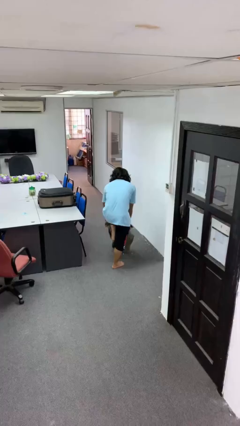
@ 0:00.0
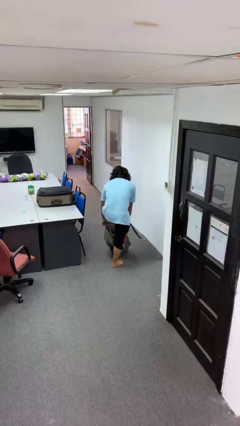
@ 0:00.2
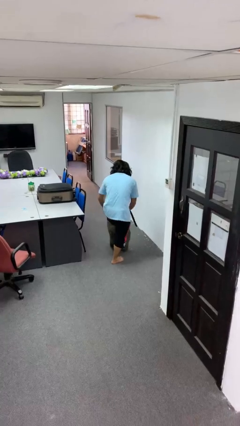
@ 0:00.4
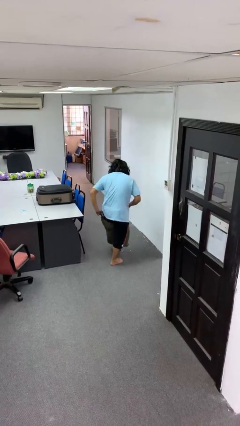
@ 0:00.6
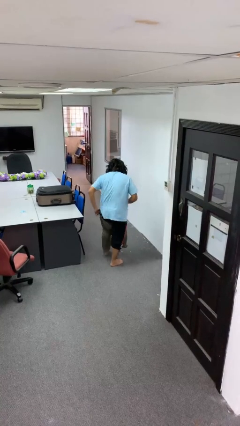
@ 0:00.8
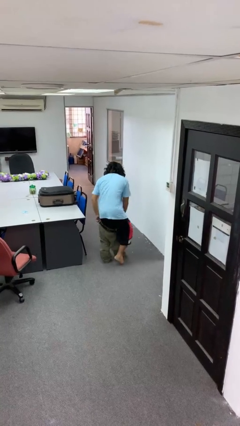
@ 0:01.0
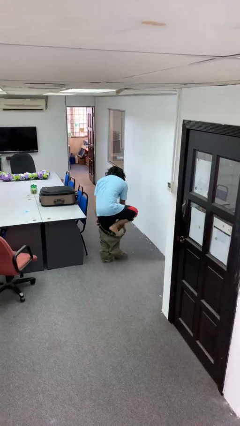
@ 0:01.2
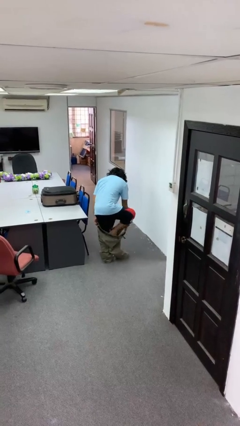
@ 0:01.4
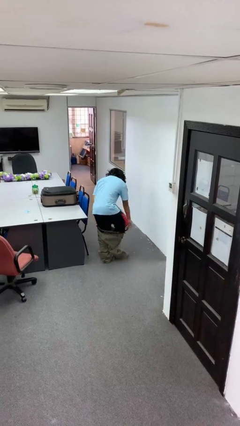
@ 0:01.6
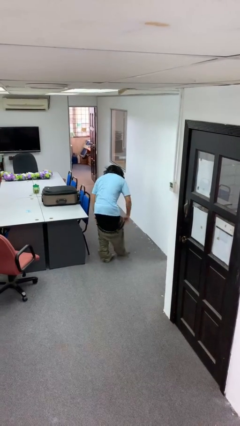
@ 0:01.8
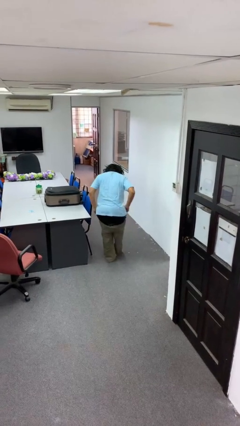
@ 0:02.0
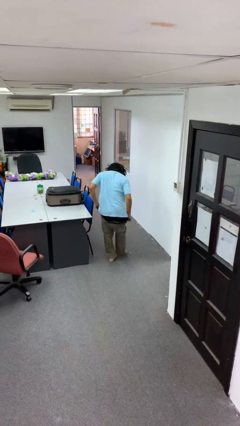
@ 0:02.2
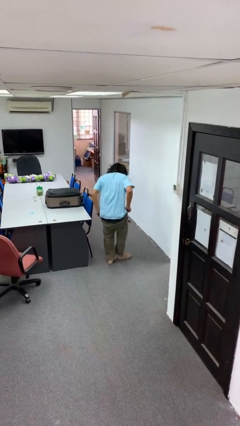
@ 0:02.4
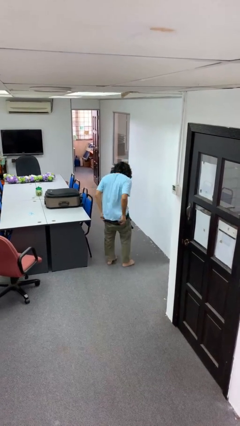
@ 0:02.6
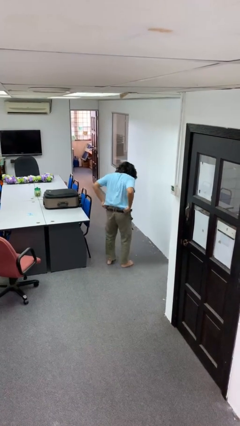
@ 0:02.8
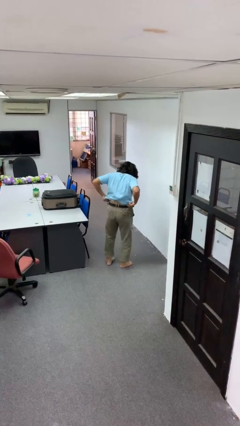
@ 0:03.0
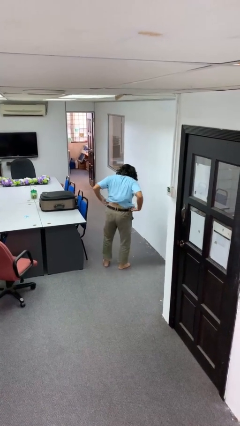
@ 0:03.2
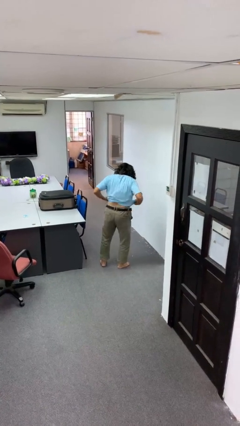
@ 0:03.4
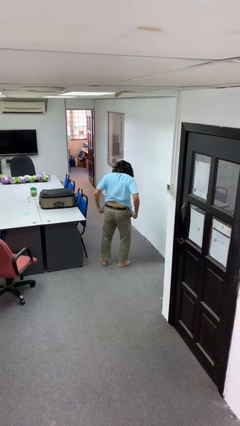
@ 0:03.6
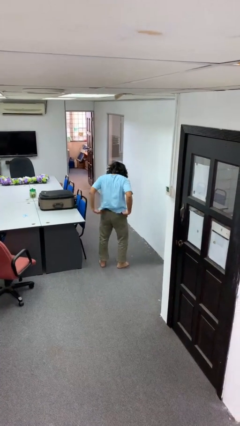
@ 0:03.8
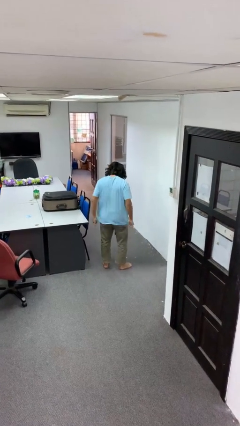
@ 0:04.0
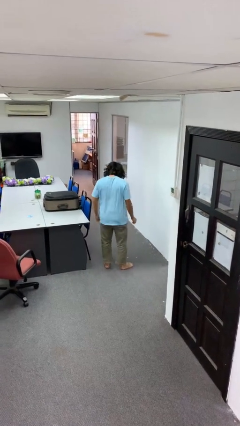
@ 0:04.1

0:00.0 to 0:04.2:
person takes off pants

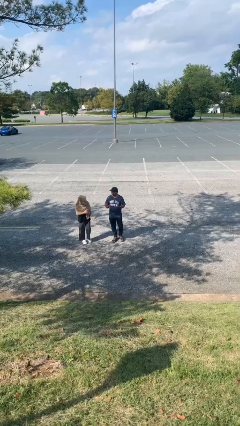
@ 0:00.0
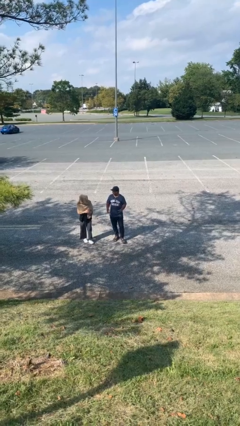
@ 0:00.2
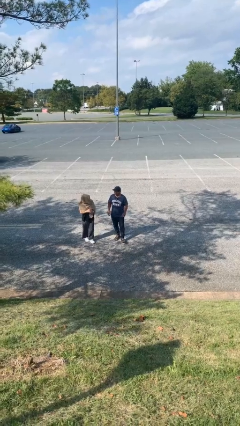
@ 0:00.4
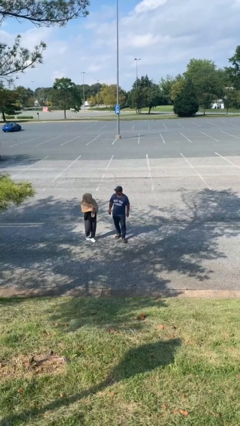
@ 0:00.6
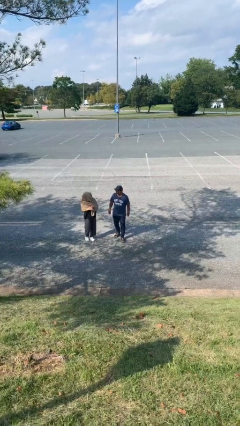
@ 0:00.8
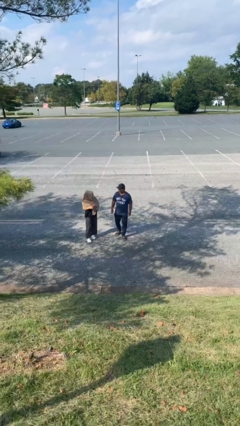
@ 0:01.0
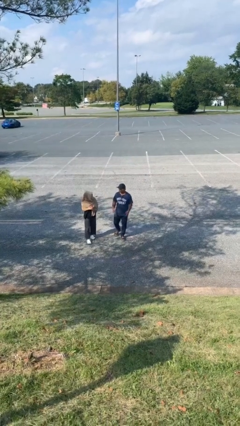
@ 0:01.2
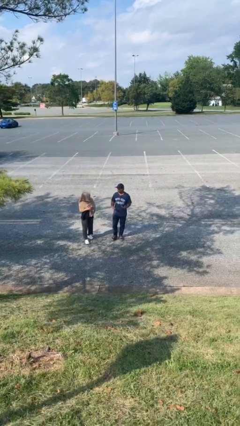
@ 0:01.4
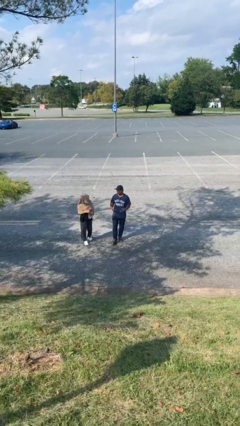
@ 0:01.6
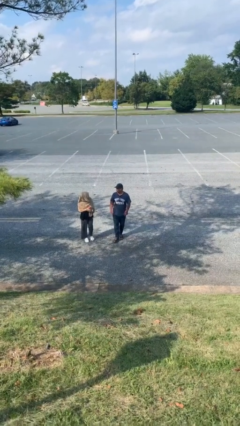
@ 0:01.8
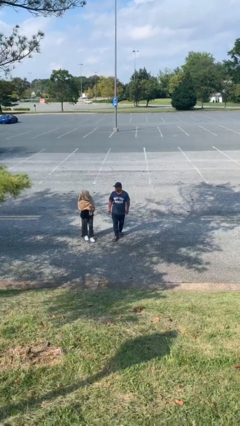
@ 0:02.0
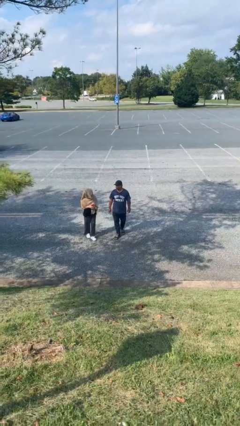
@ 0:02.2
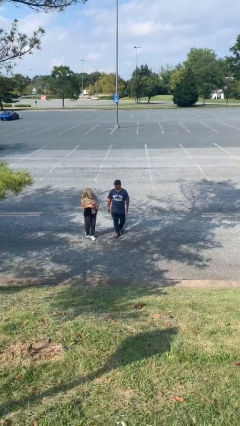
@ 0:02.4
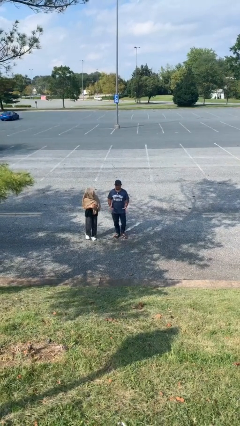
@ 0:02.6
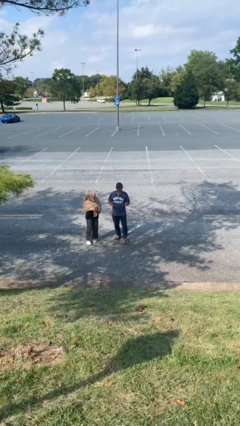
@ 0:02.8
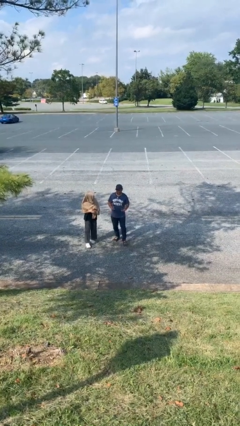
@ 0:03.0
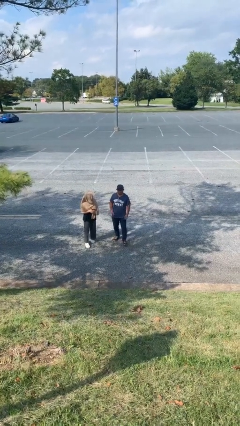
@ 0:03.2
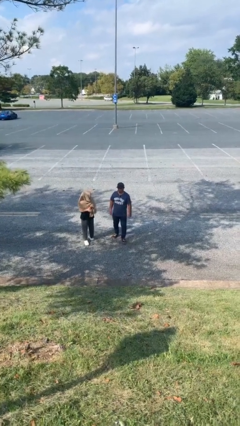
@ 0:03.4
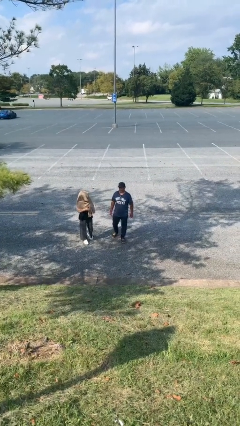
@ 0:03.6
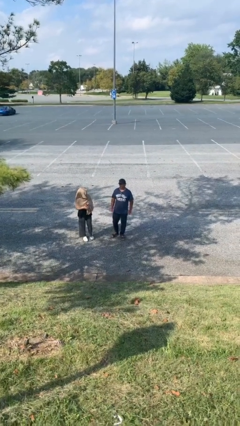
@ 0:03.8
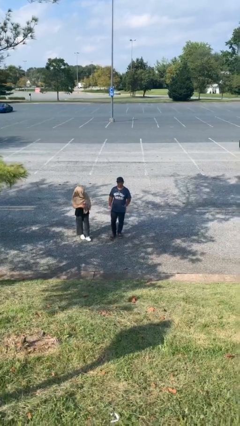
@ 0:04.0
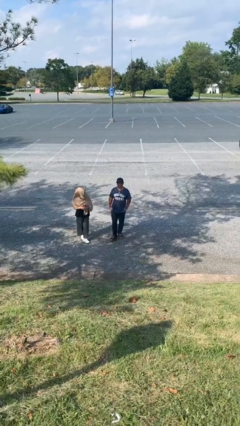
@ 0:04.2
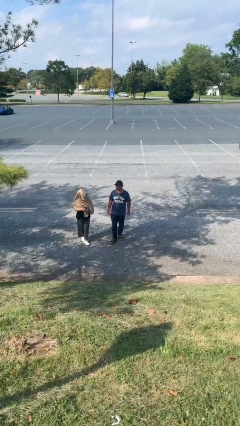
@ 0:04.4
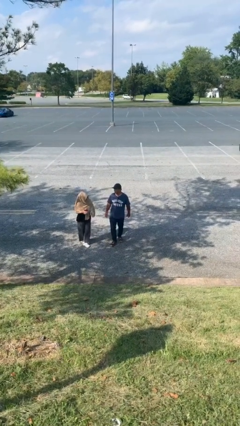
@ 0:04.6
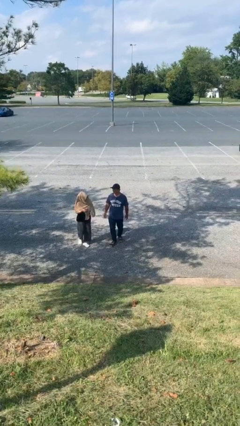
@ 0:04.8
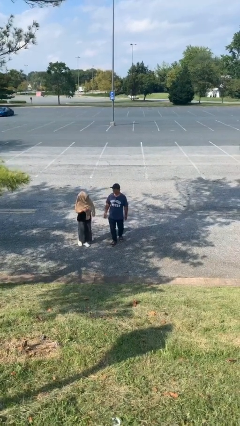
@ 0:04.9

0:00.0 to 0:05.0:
person talks to person

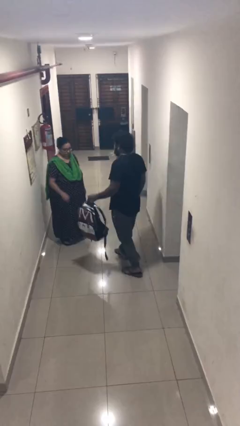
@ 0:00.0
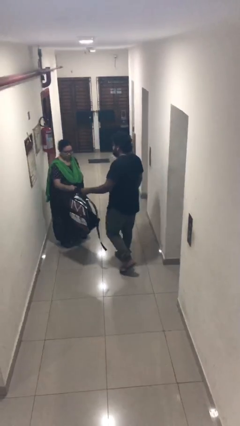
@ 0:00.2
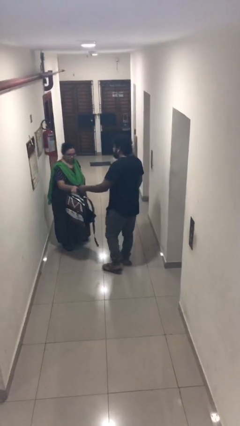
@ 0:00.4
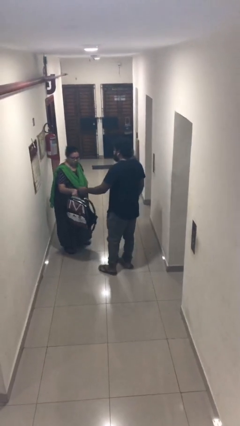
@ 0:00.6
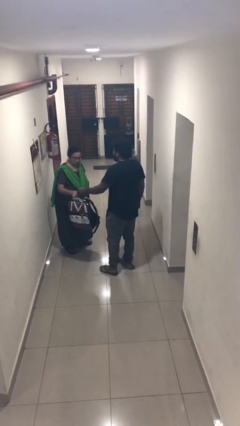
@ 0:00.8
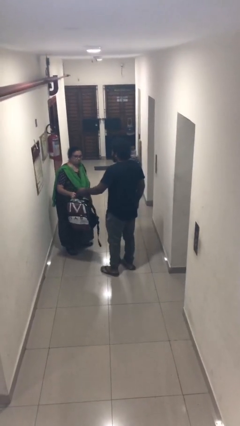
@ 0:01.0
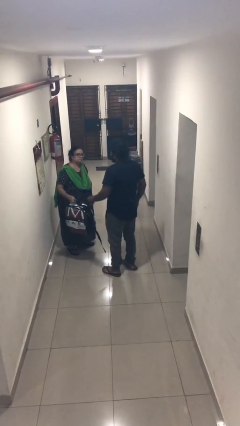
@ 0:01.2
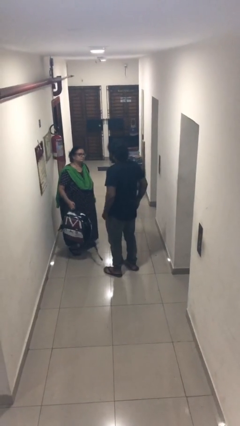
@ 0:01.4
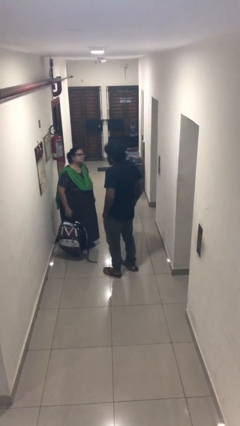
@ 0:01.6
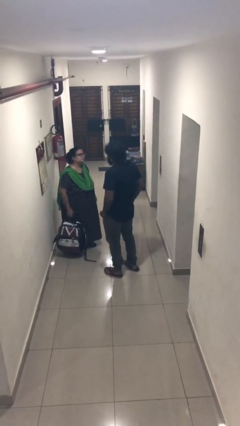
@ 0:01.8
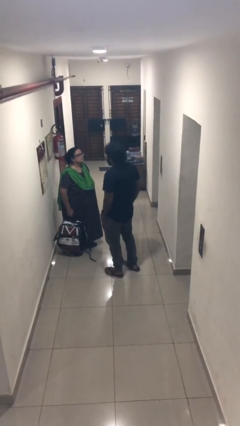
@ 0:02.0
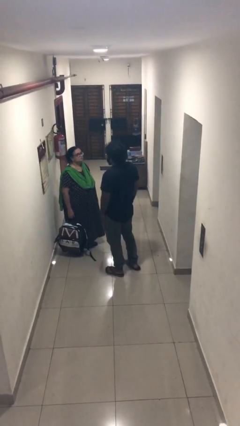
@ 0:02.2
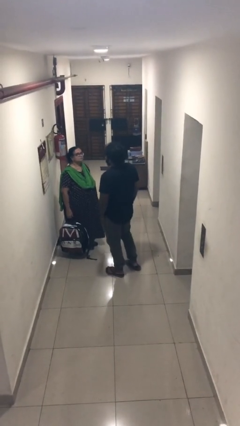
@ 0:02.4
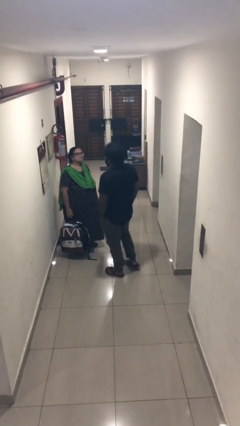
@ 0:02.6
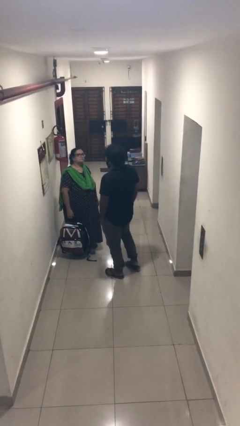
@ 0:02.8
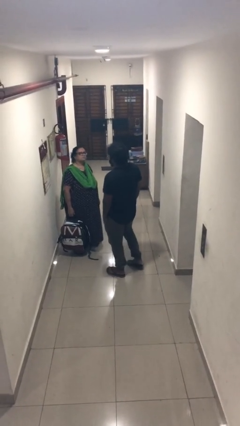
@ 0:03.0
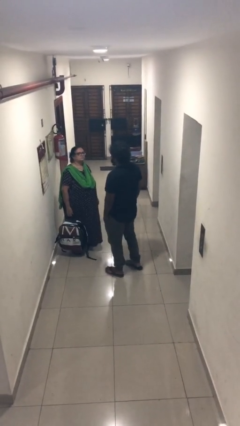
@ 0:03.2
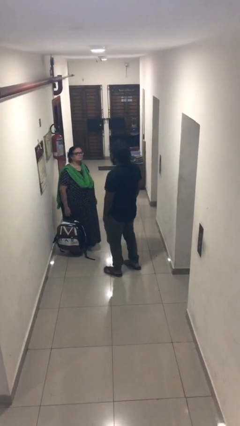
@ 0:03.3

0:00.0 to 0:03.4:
person transfers object to person

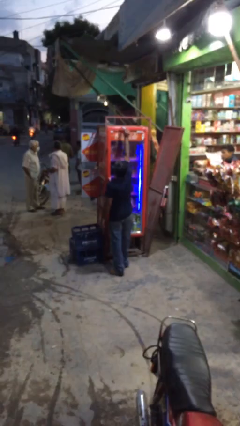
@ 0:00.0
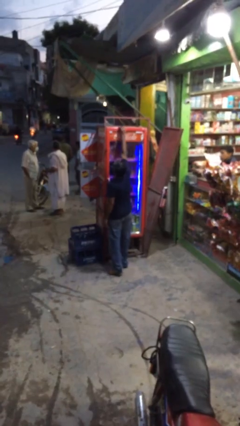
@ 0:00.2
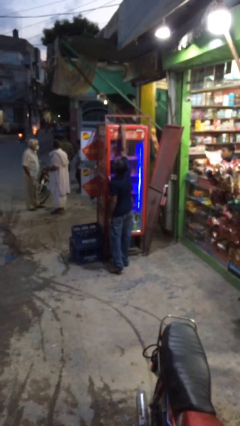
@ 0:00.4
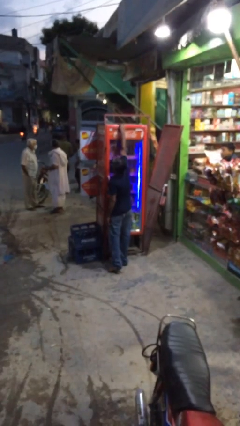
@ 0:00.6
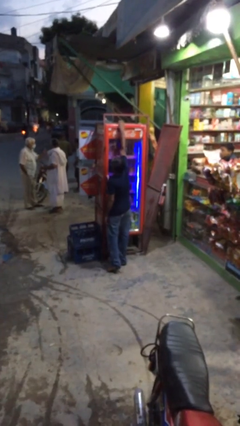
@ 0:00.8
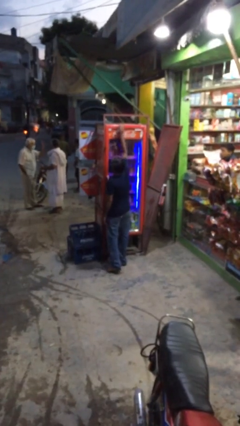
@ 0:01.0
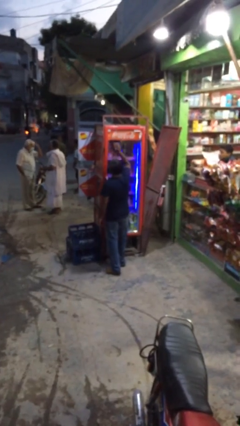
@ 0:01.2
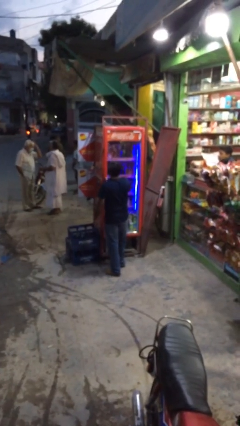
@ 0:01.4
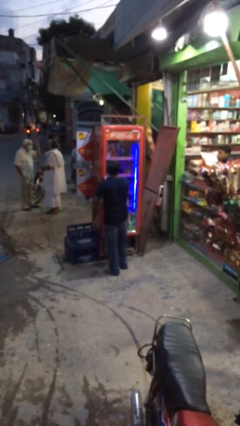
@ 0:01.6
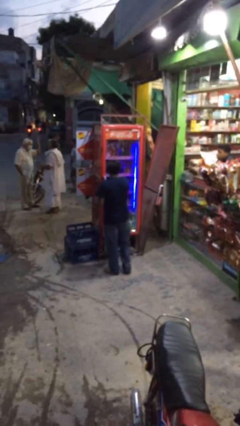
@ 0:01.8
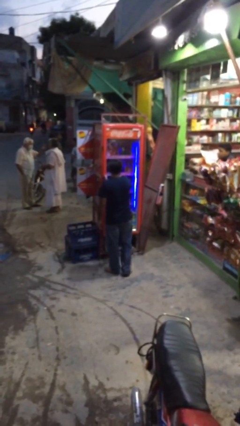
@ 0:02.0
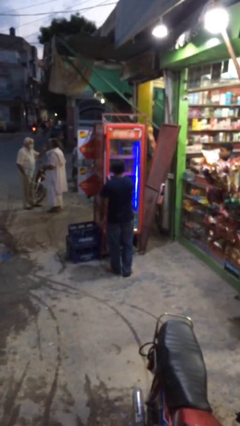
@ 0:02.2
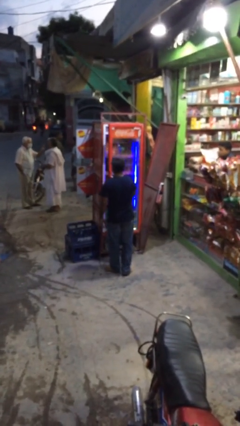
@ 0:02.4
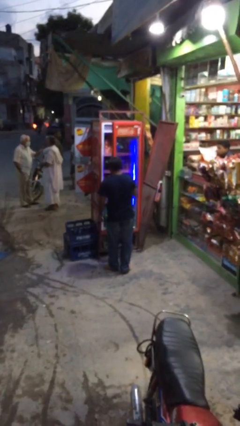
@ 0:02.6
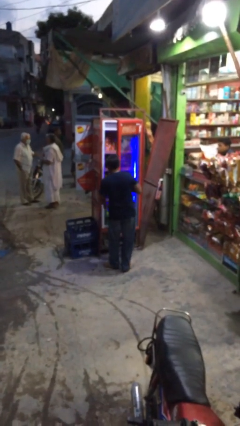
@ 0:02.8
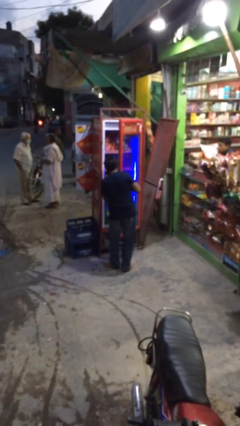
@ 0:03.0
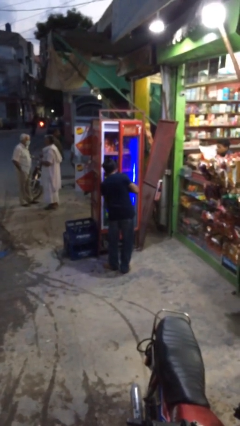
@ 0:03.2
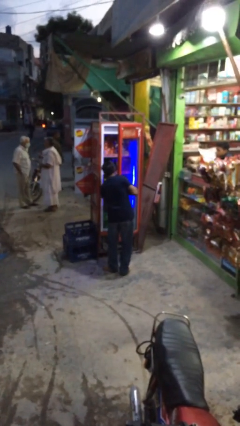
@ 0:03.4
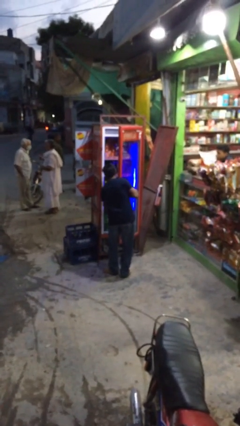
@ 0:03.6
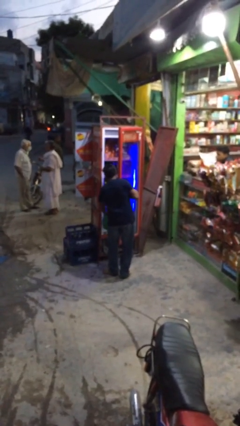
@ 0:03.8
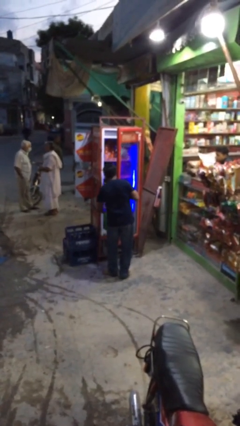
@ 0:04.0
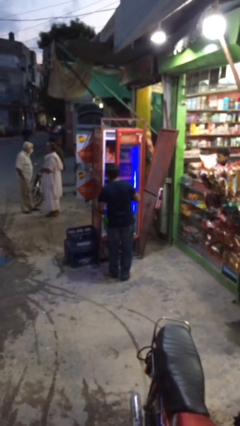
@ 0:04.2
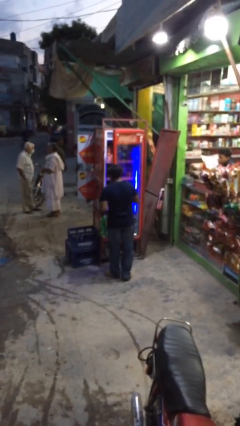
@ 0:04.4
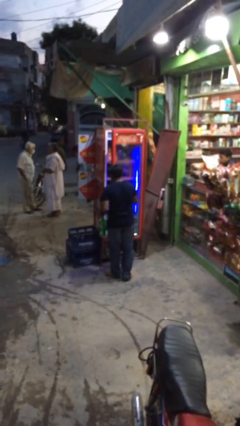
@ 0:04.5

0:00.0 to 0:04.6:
person purchases from machine

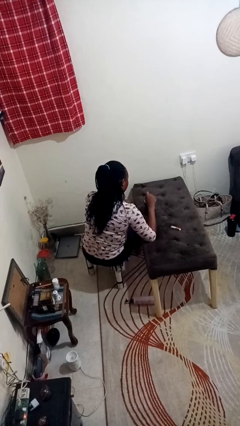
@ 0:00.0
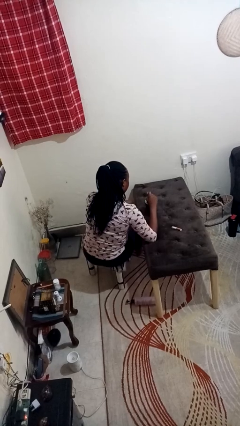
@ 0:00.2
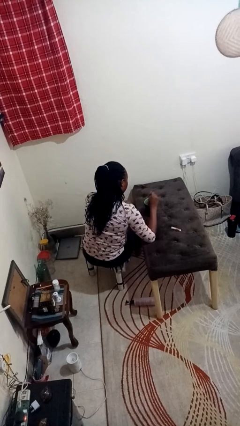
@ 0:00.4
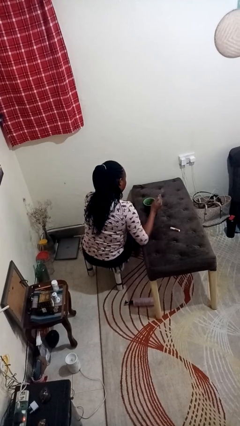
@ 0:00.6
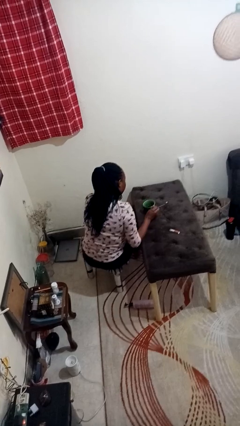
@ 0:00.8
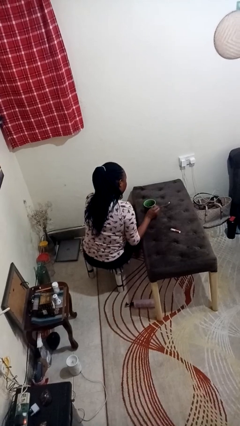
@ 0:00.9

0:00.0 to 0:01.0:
person stirs mug
